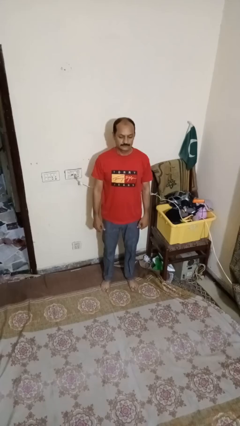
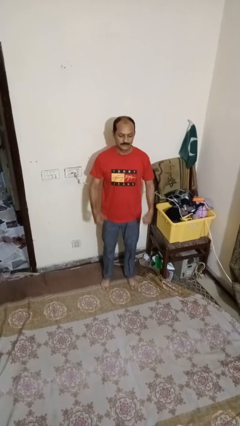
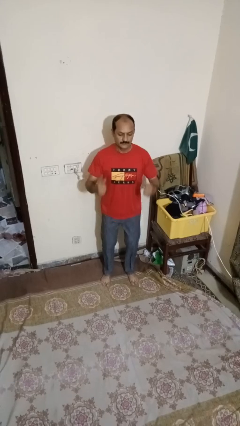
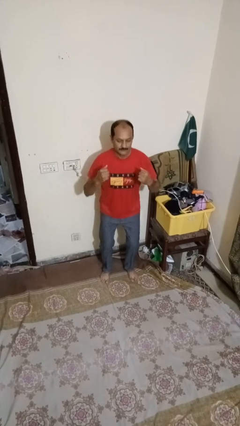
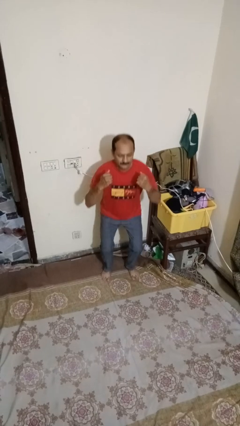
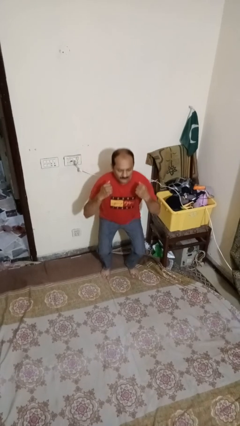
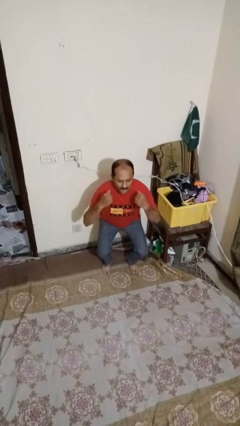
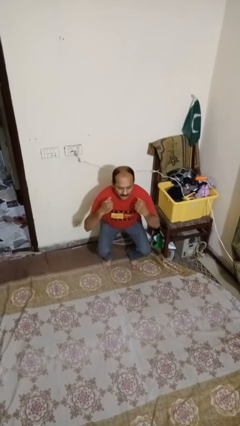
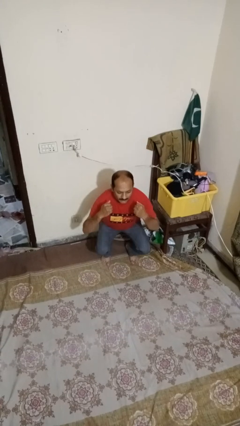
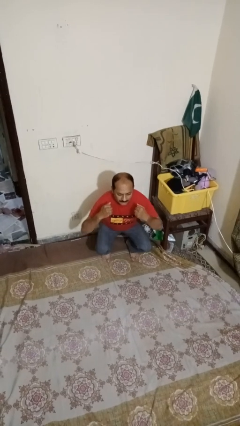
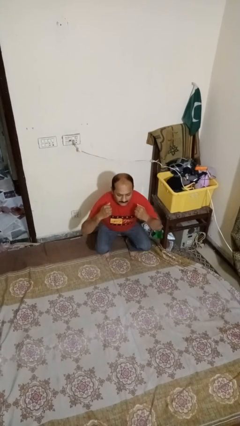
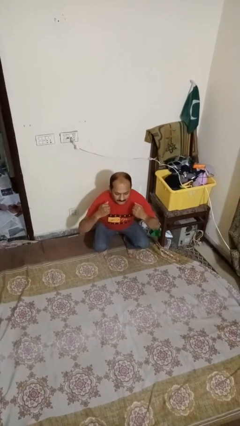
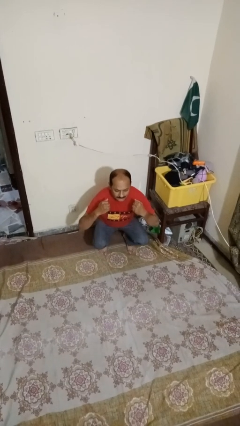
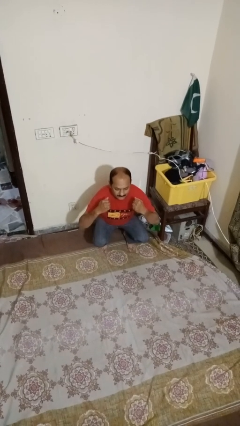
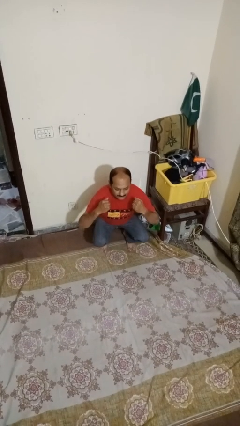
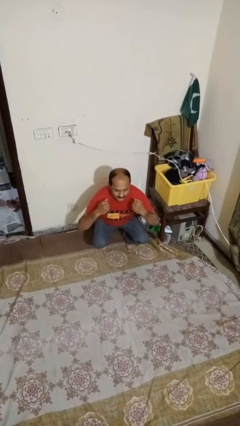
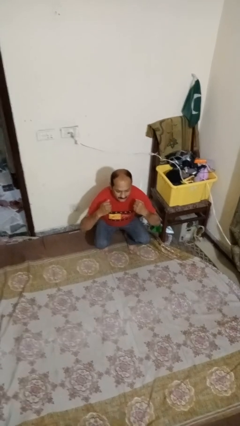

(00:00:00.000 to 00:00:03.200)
person squats

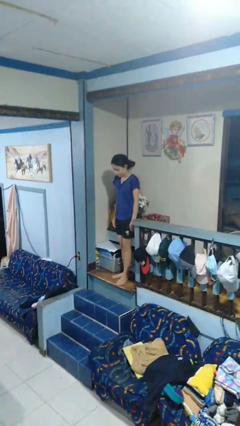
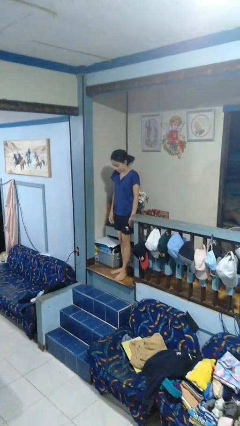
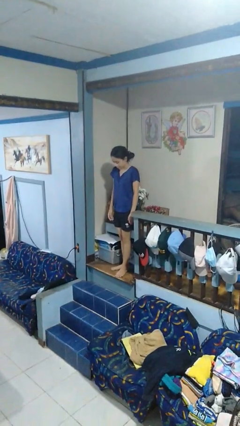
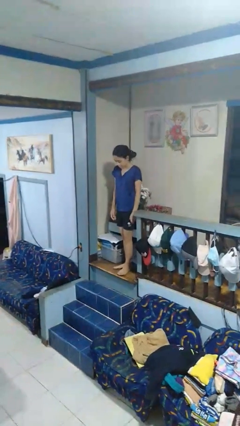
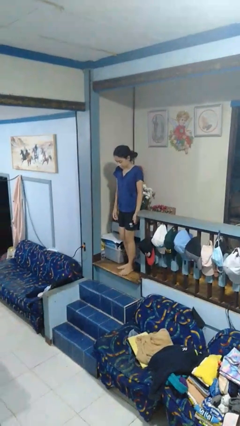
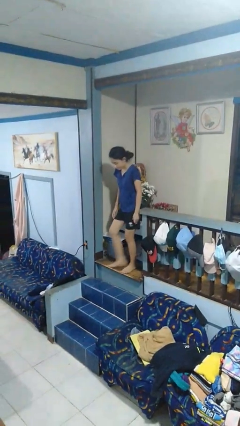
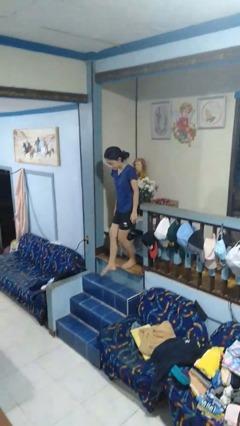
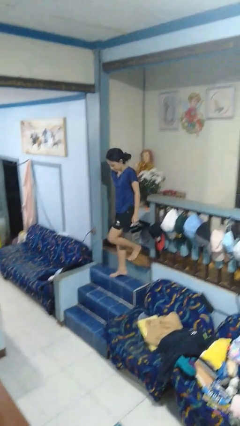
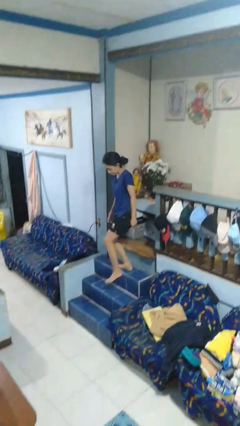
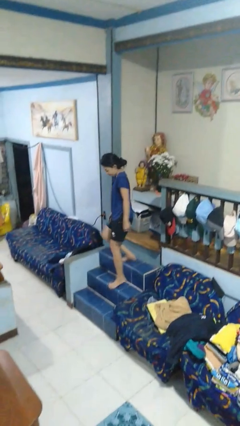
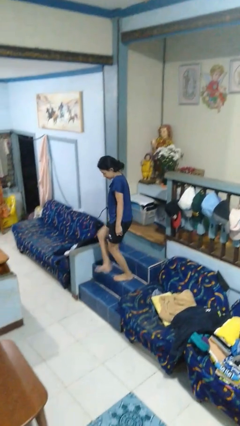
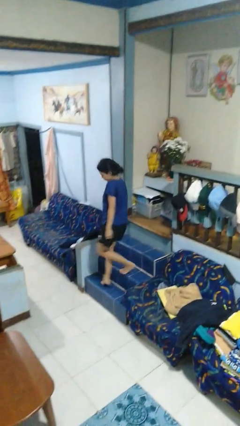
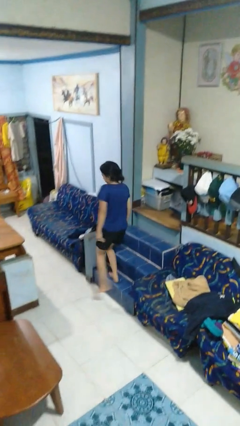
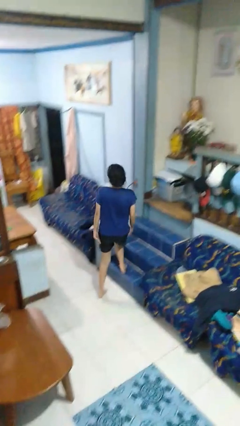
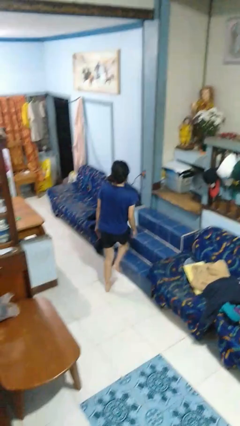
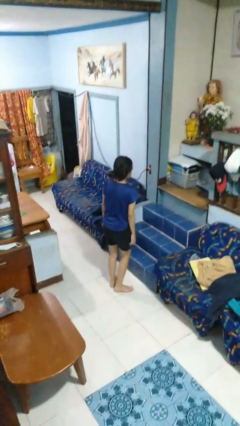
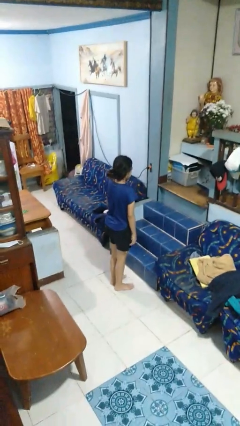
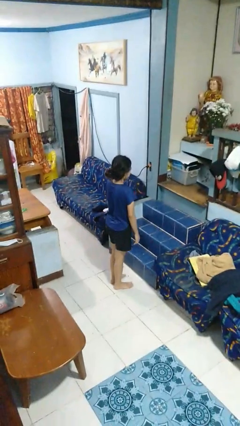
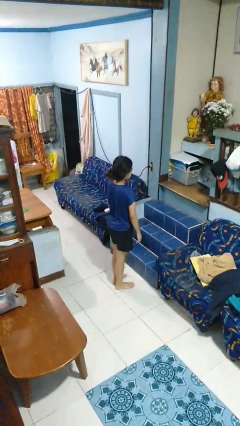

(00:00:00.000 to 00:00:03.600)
person climbs down stairs

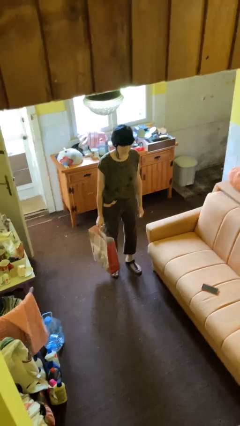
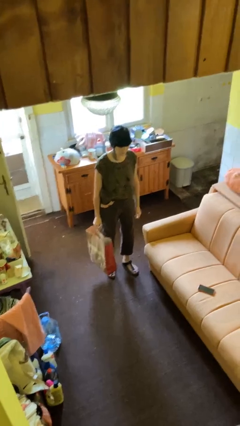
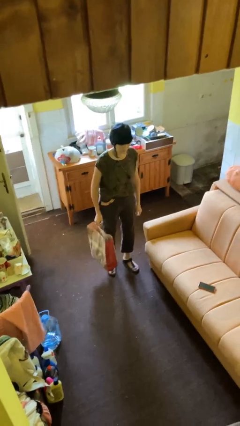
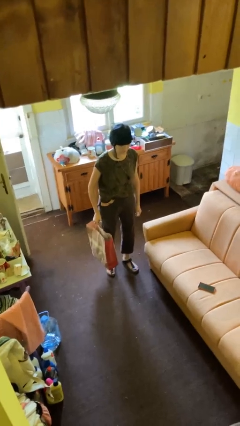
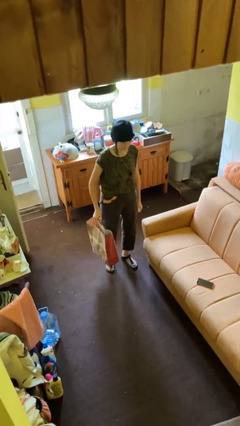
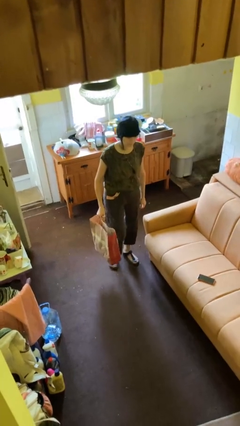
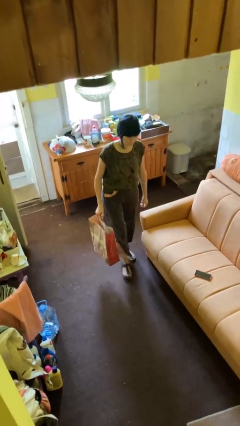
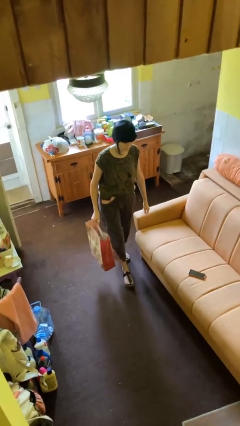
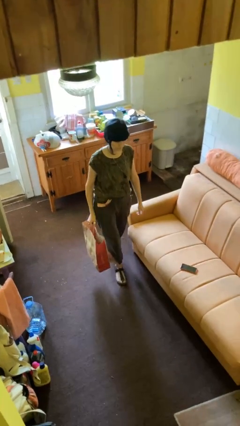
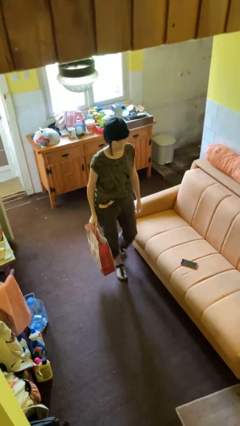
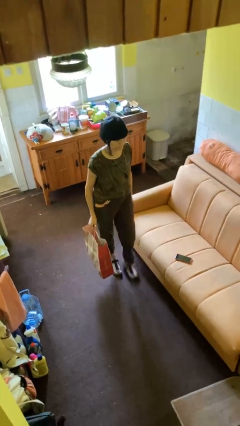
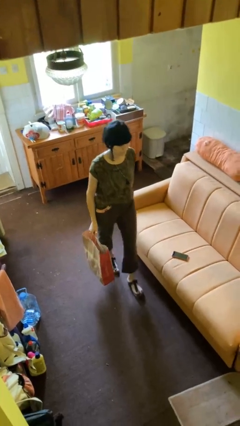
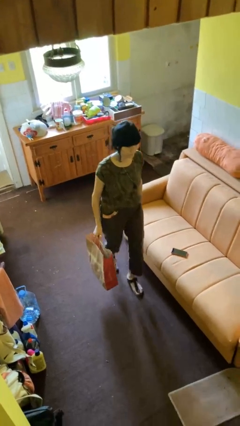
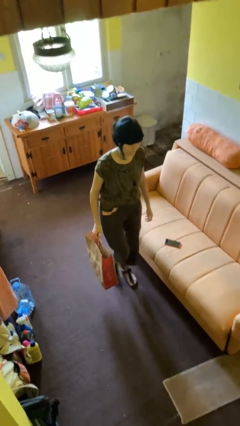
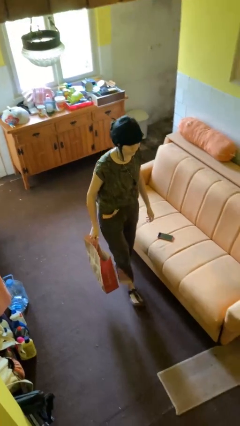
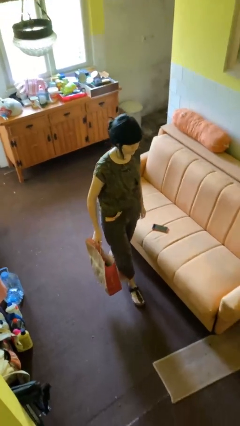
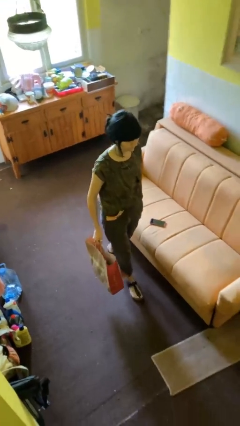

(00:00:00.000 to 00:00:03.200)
person carries groceries

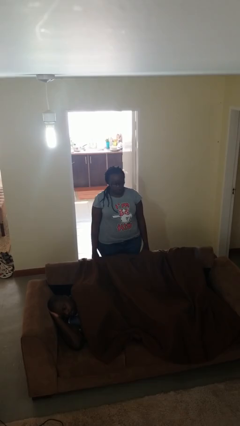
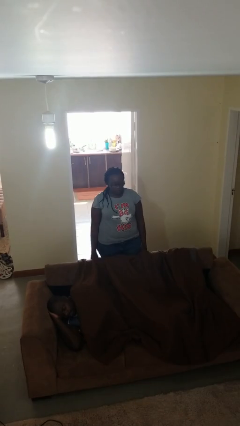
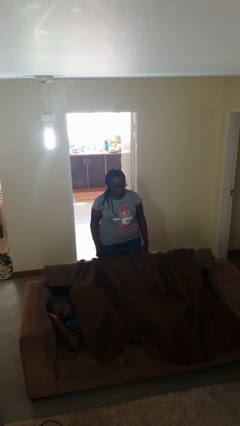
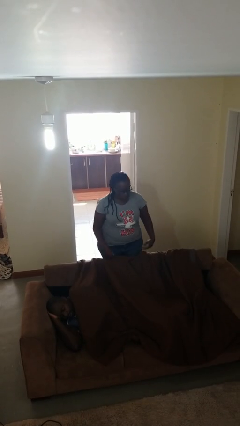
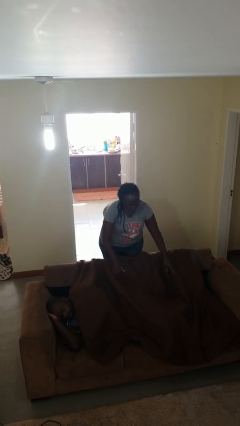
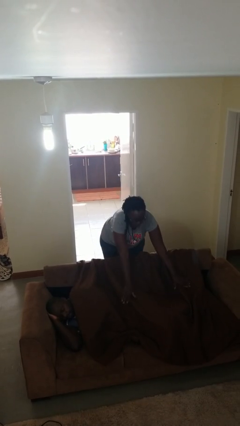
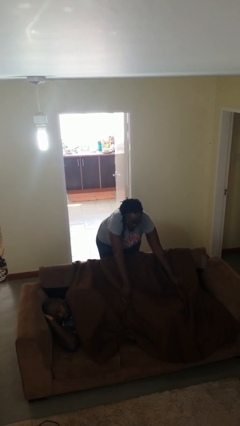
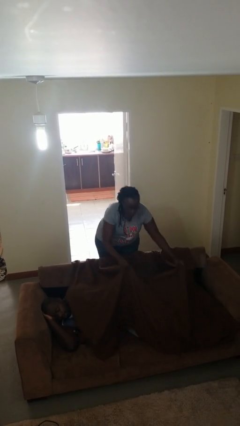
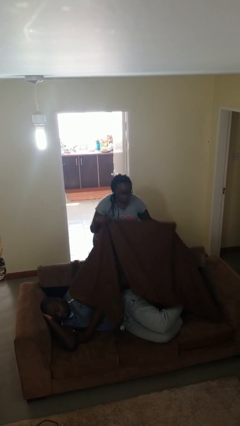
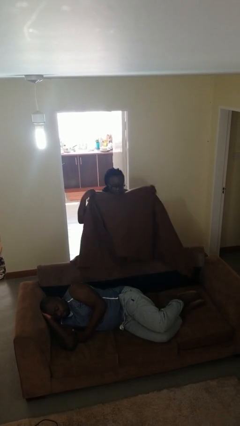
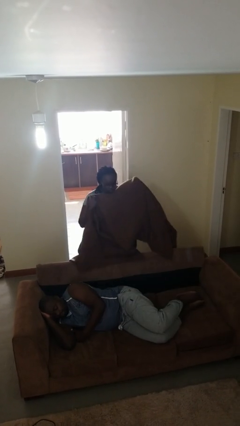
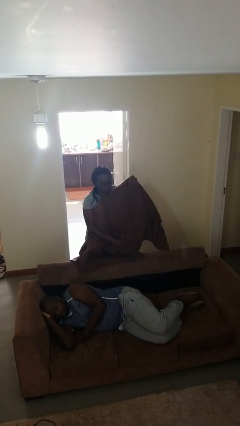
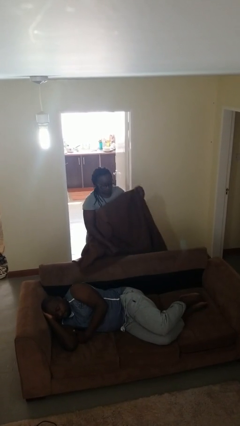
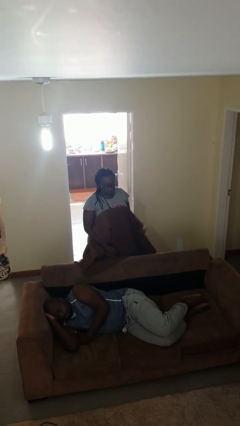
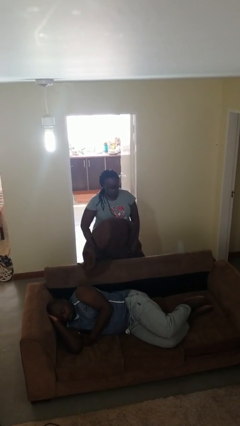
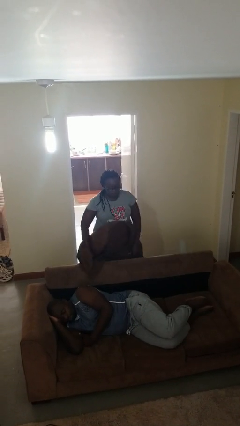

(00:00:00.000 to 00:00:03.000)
person uncovers friend with blanket

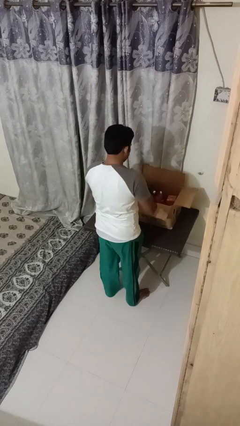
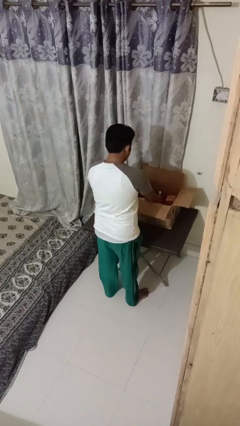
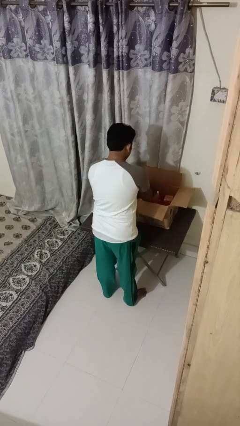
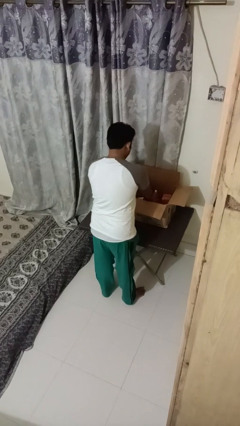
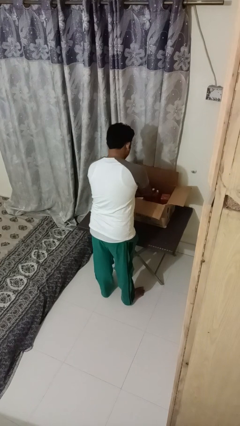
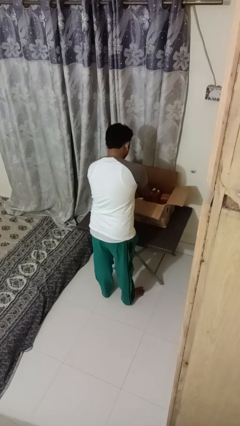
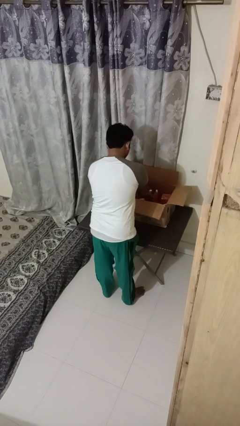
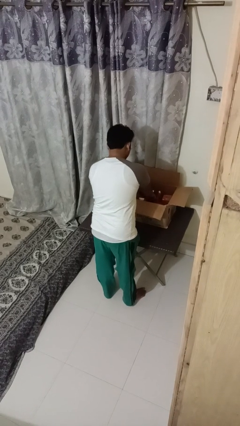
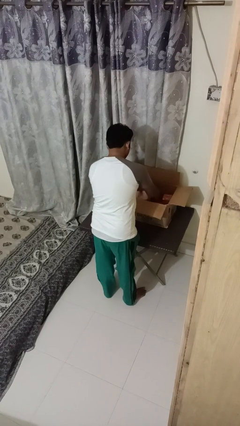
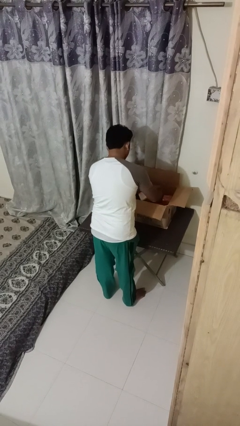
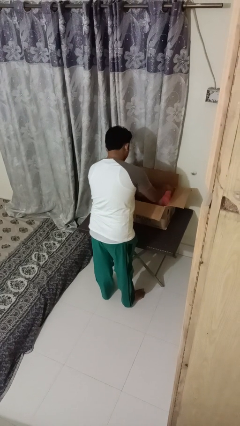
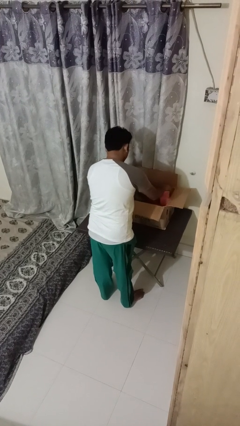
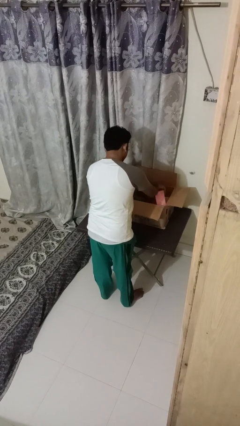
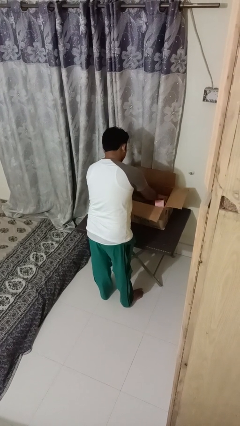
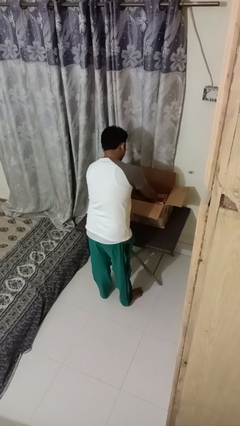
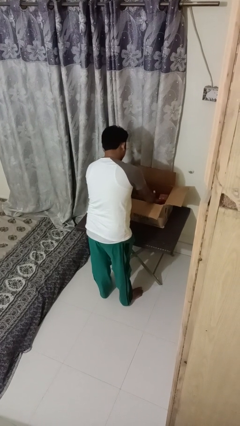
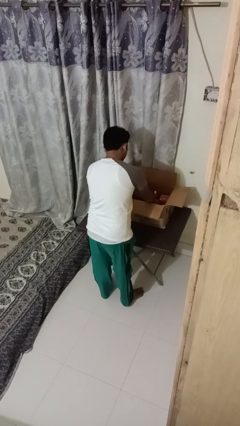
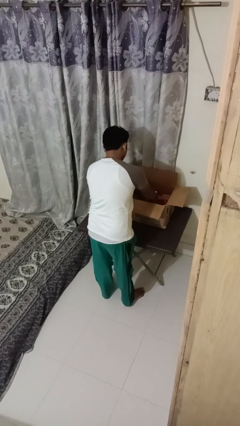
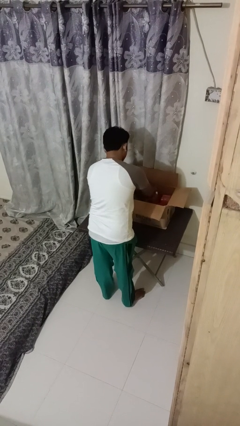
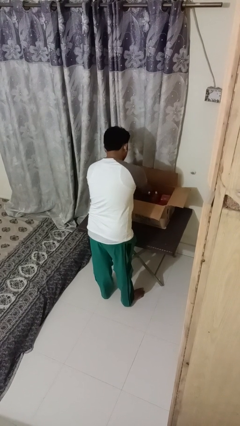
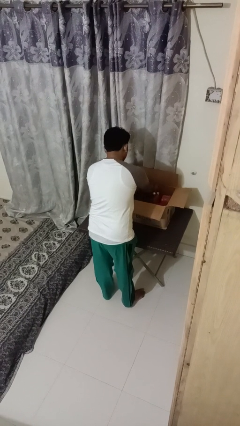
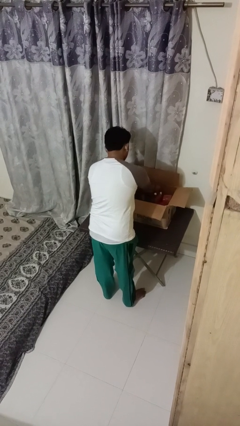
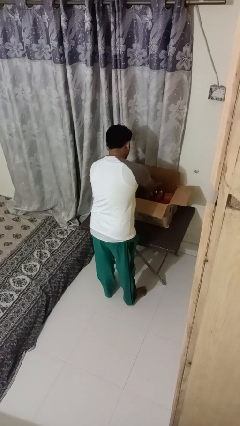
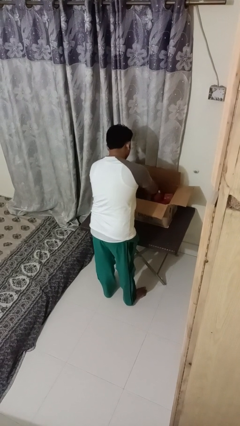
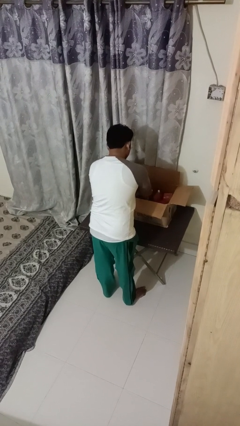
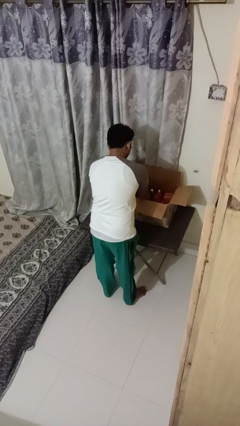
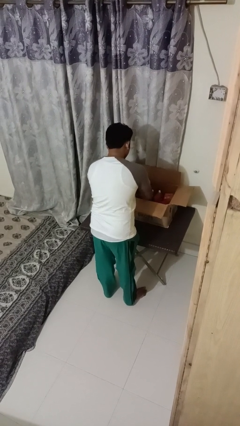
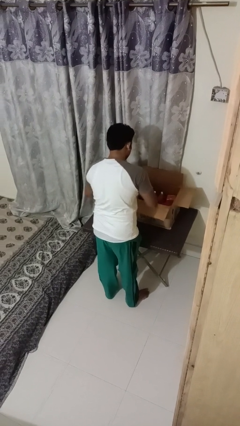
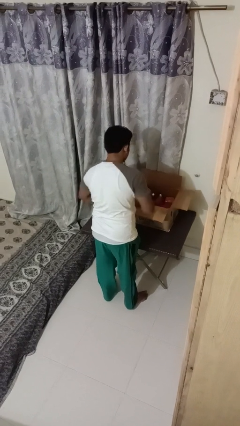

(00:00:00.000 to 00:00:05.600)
person searches in box
